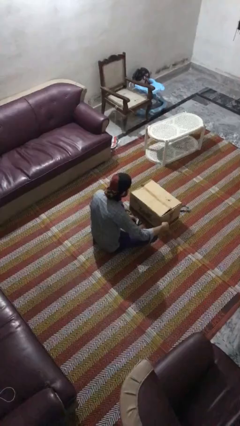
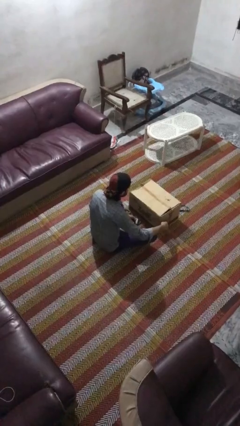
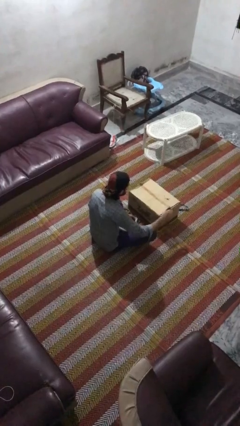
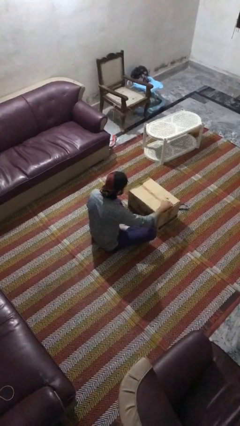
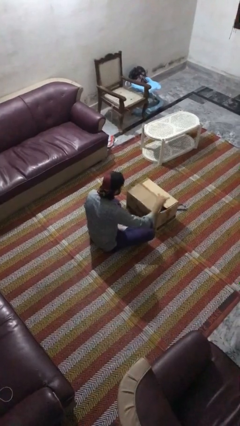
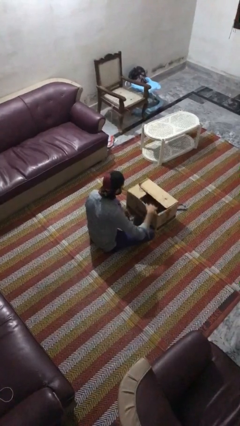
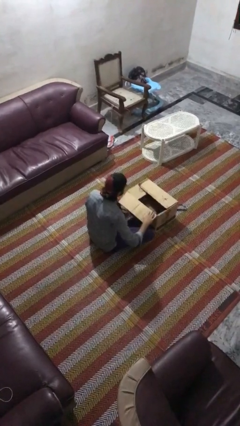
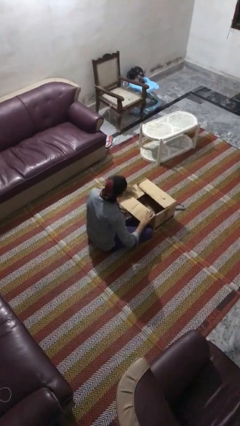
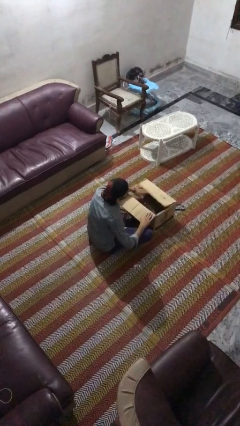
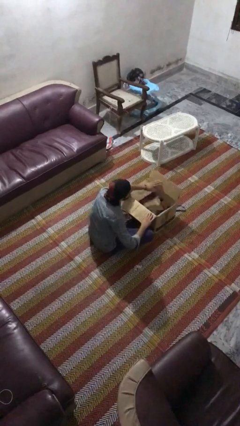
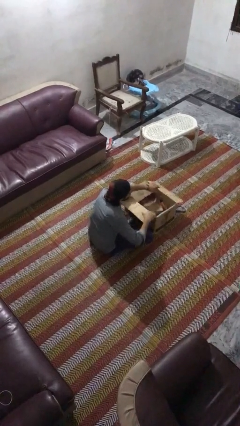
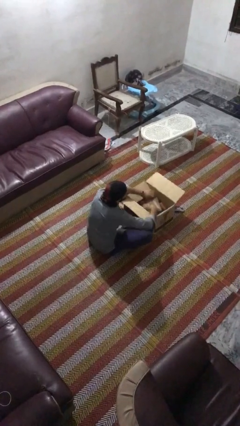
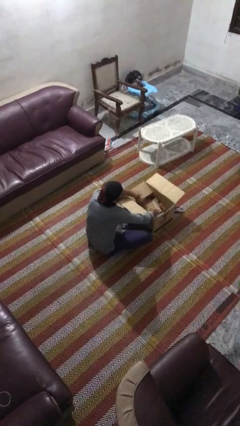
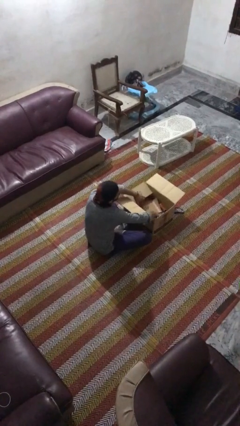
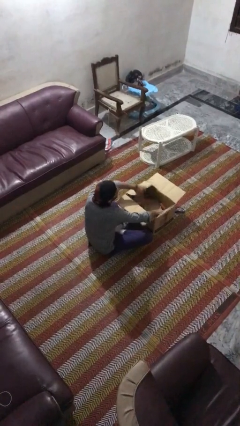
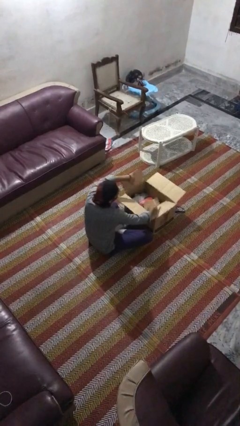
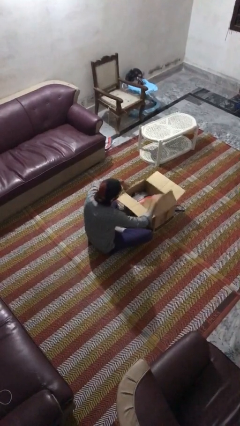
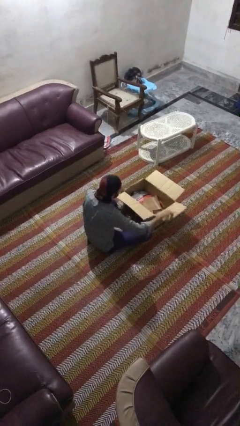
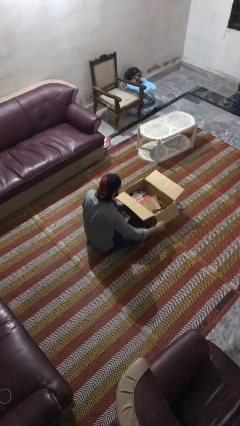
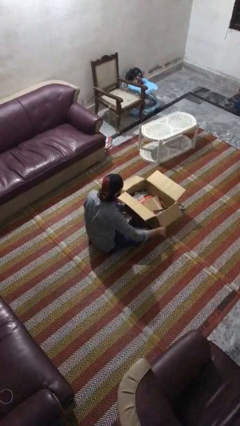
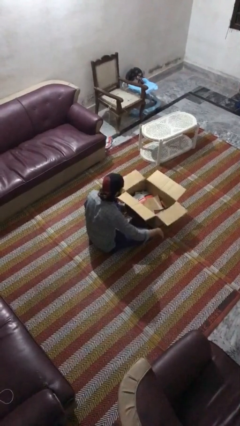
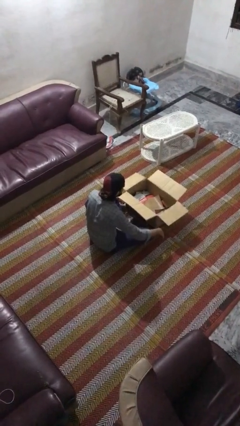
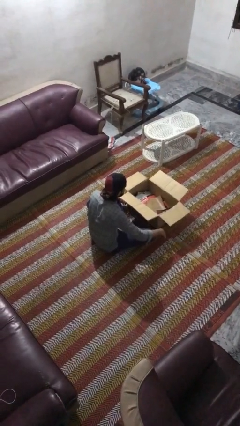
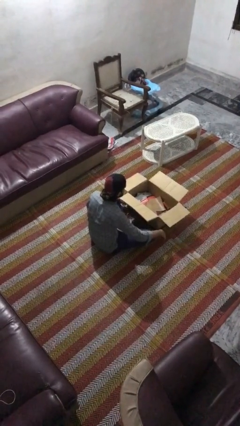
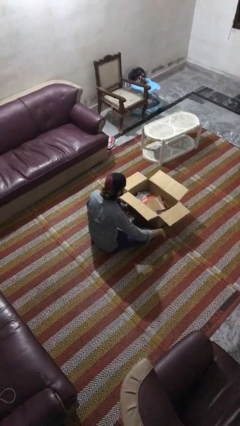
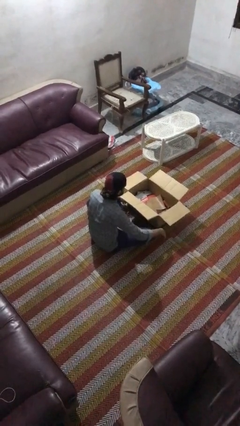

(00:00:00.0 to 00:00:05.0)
person opens box

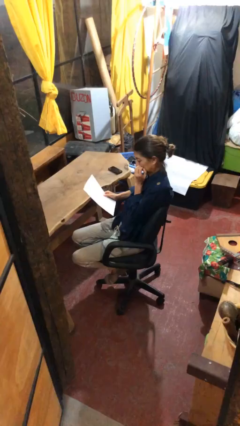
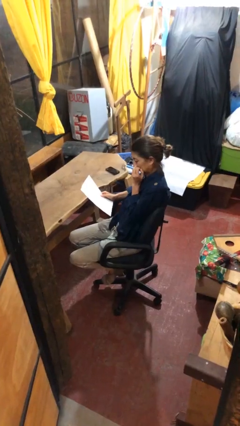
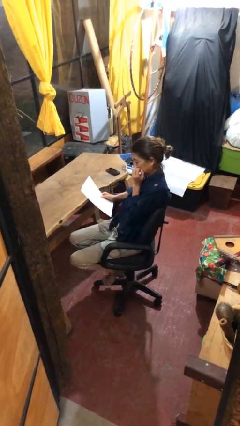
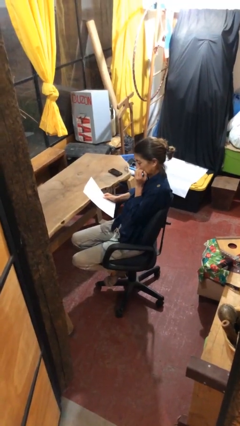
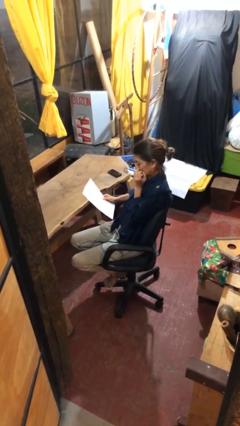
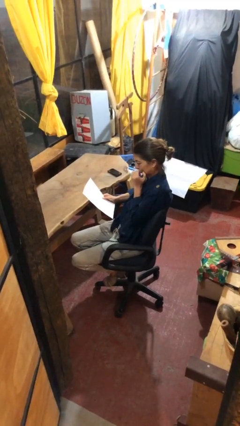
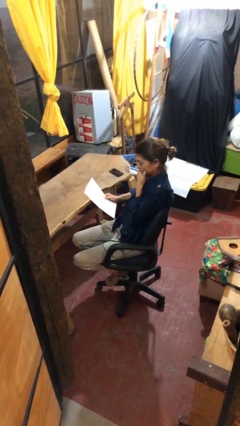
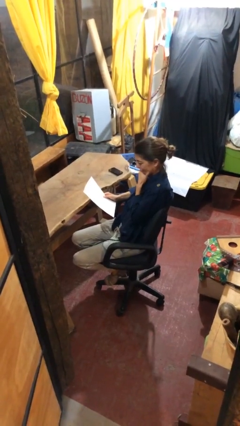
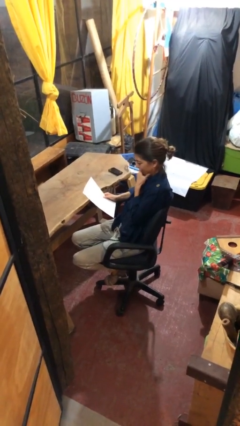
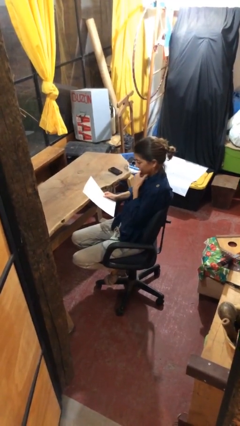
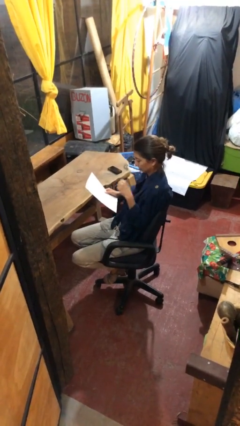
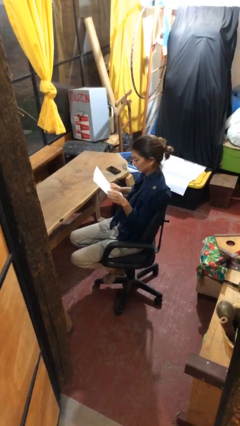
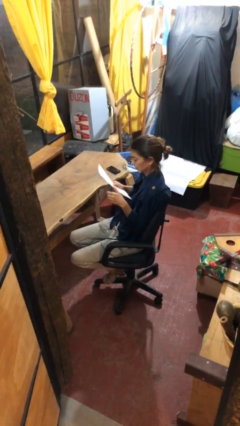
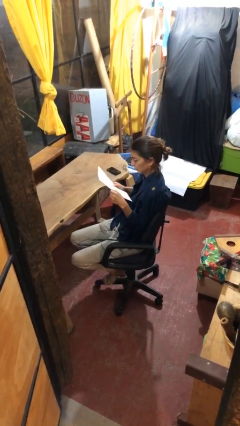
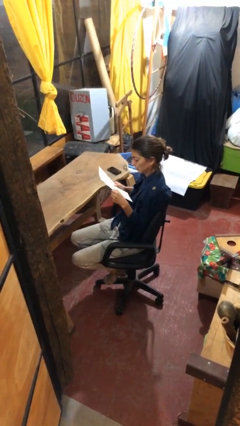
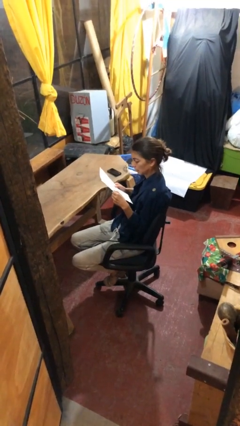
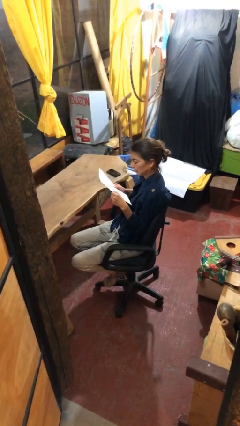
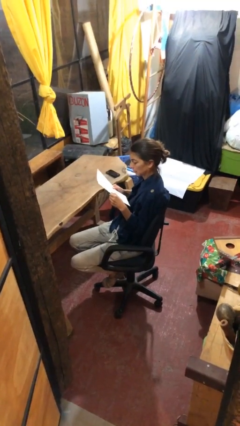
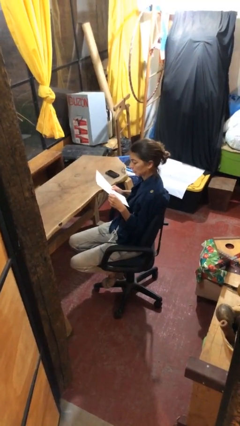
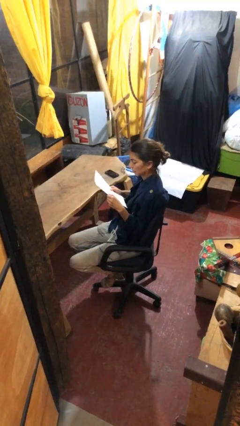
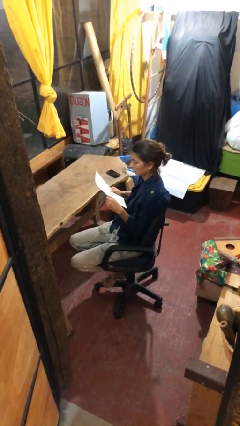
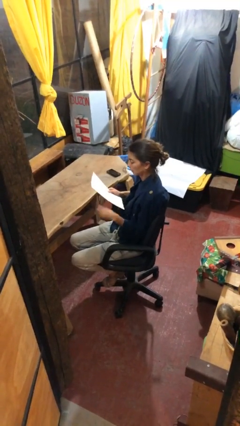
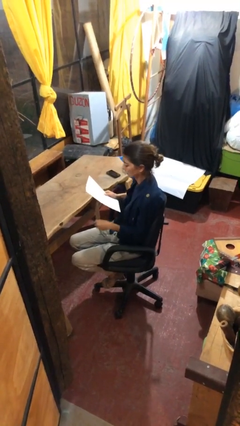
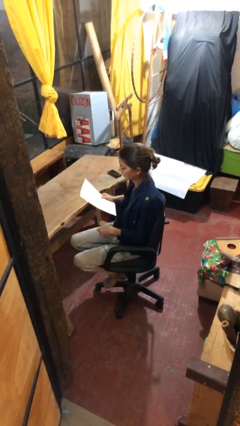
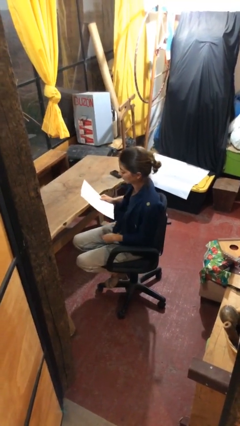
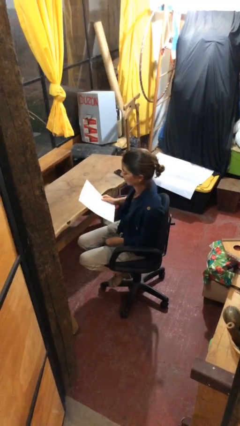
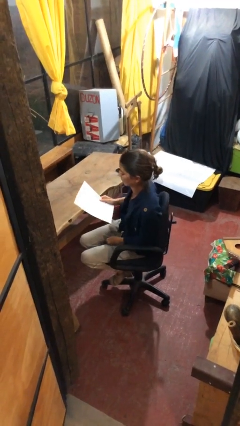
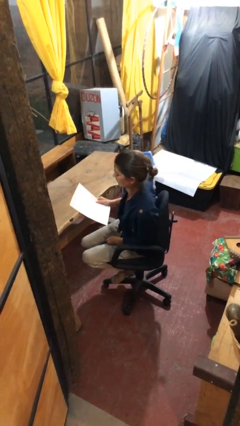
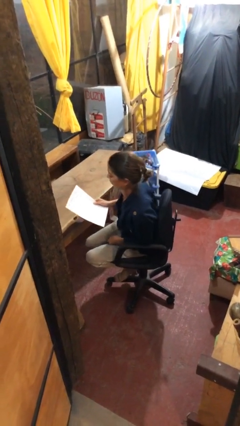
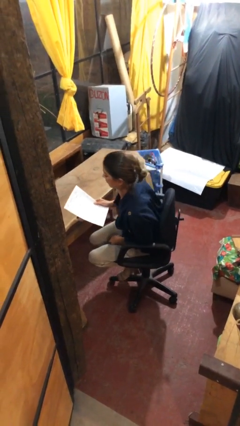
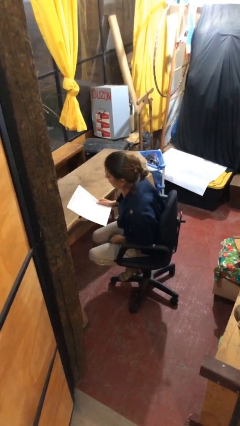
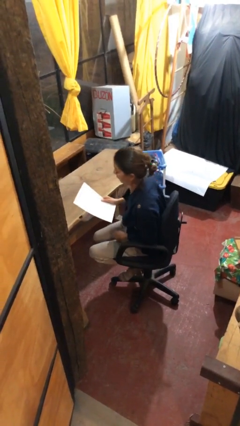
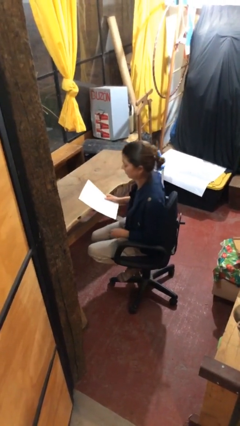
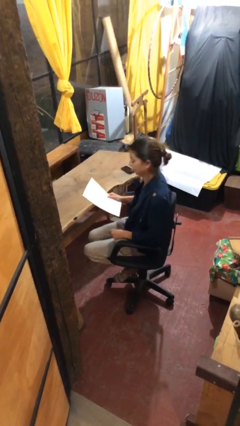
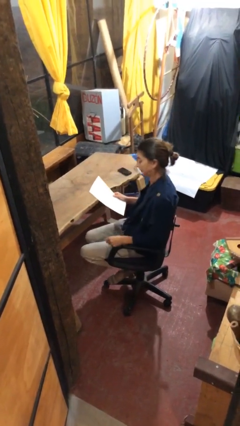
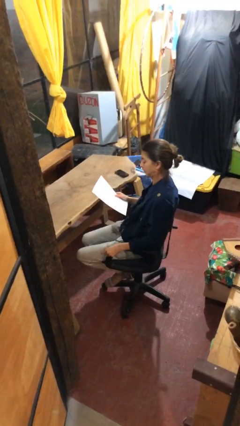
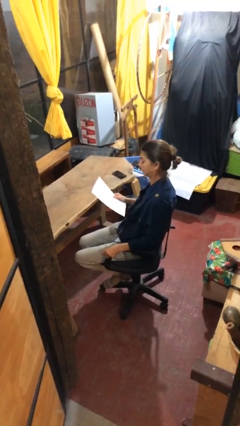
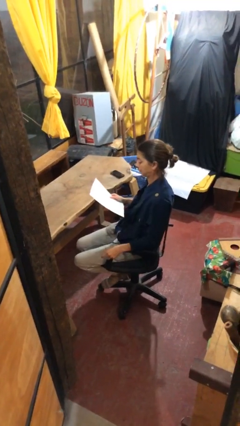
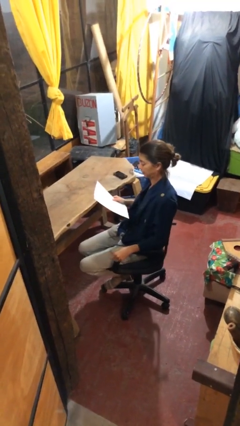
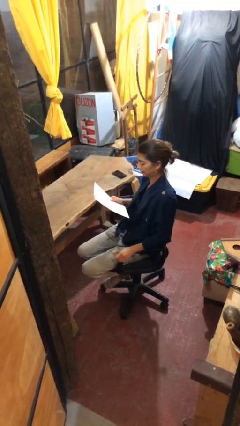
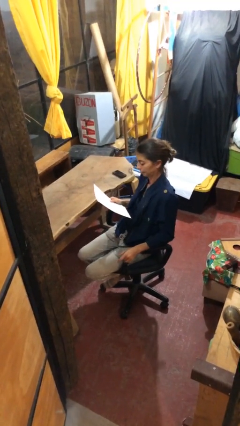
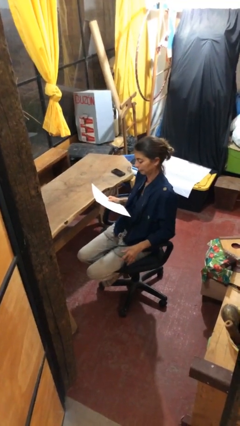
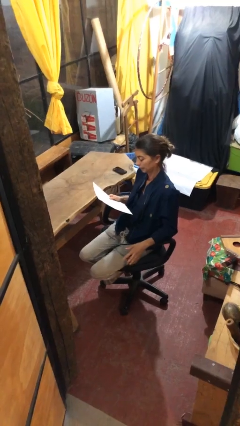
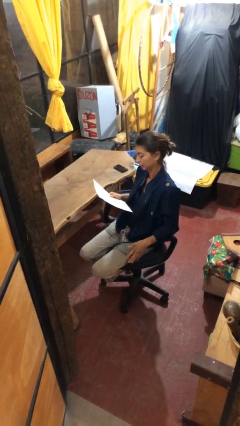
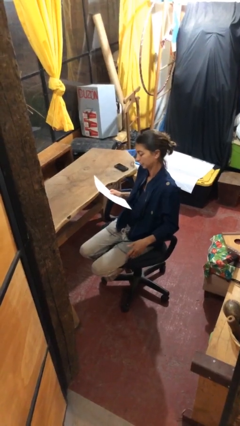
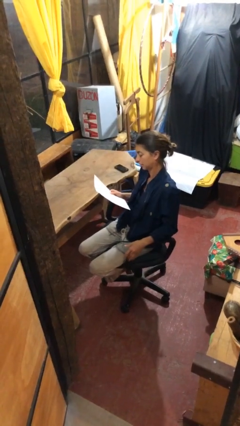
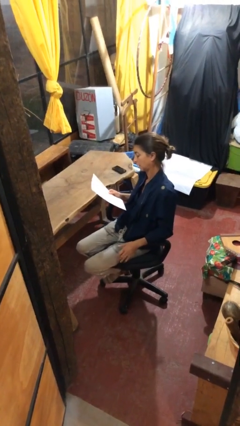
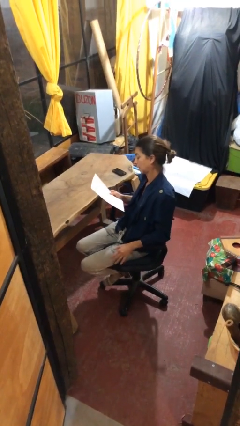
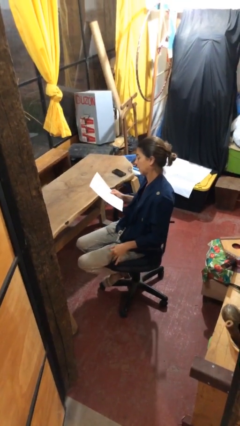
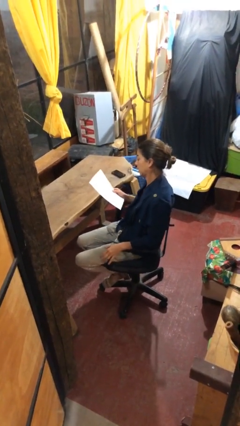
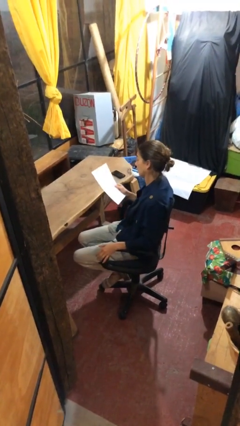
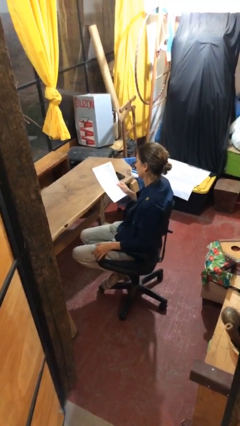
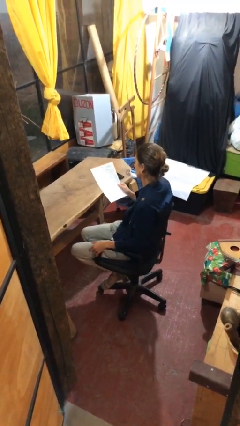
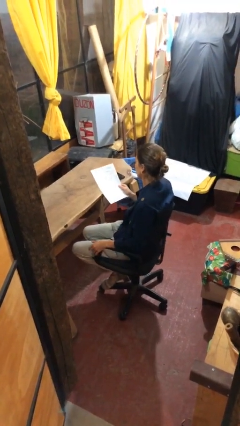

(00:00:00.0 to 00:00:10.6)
person reads document

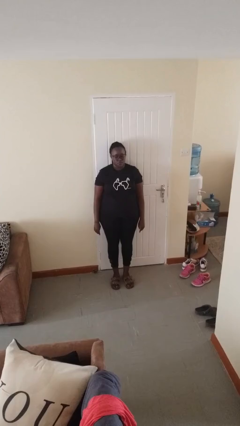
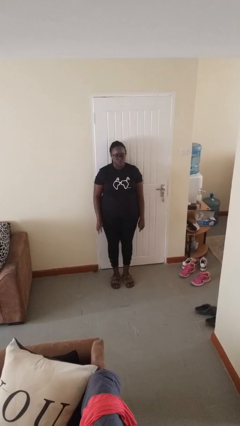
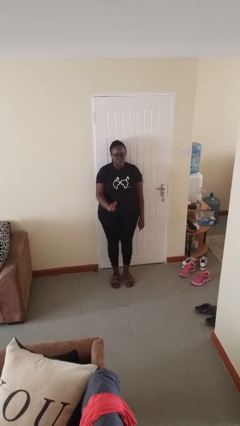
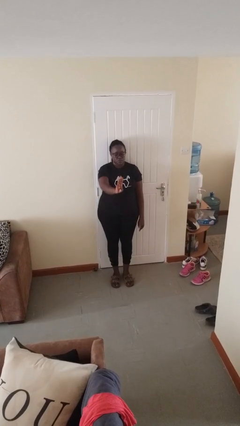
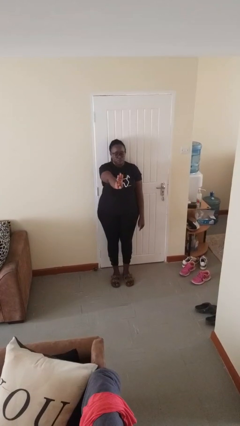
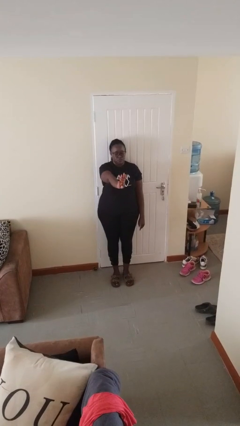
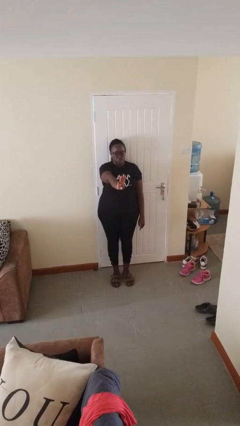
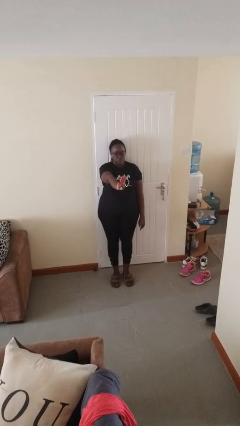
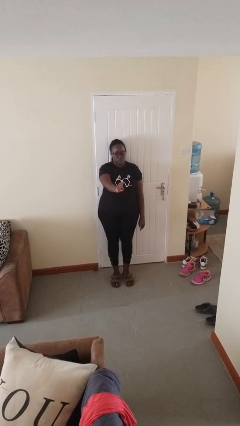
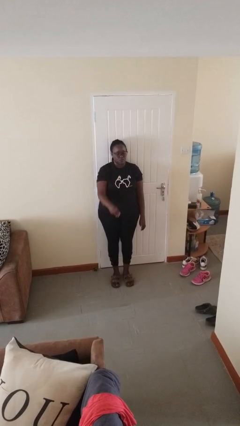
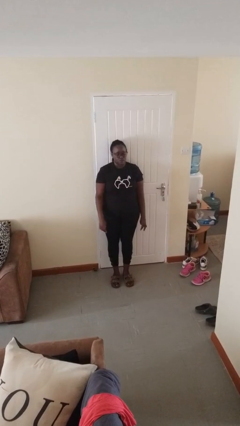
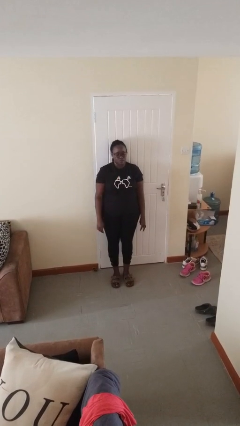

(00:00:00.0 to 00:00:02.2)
person gestures number three

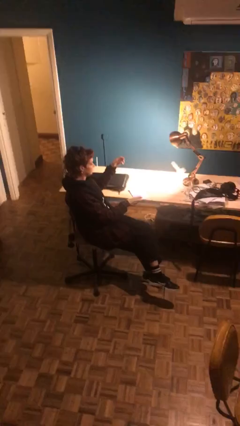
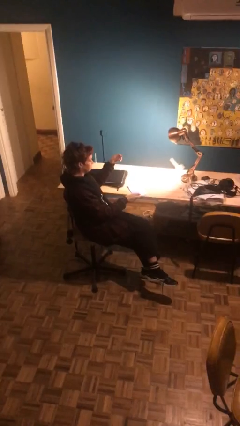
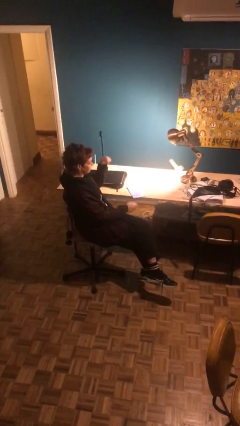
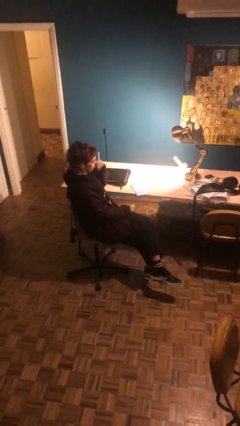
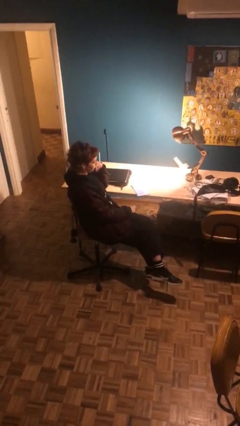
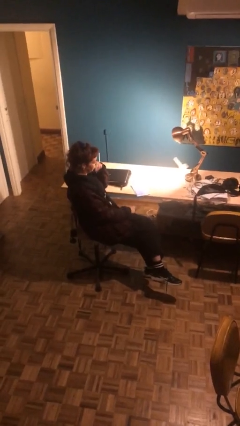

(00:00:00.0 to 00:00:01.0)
person puts down object on table
